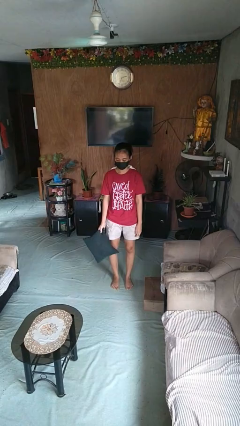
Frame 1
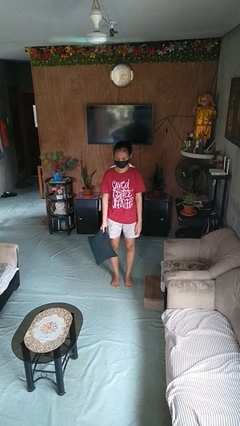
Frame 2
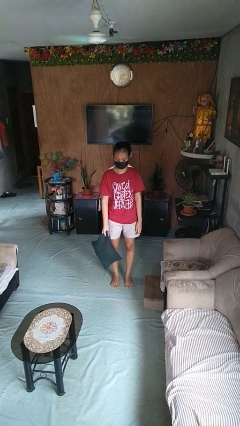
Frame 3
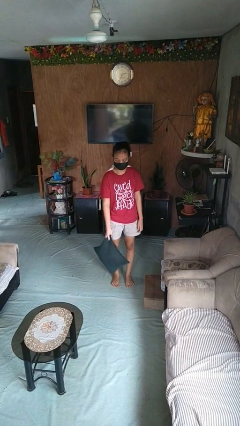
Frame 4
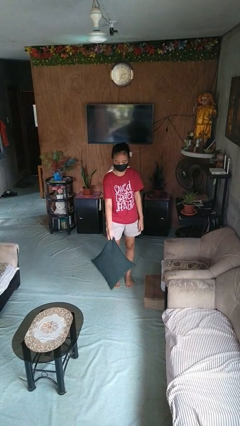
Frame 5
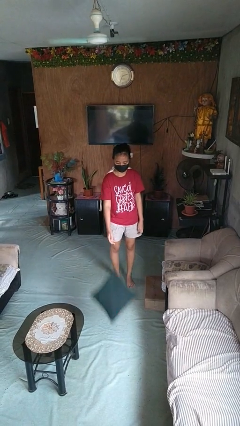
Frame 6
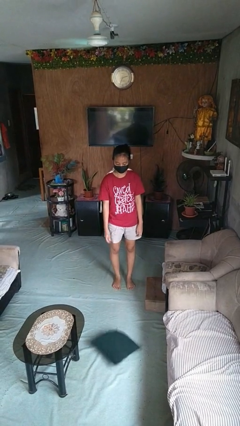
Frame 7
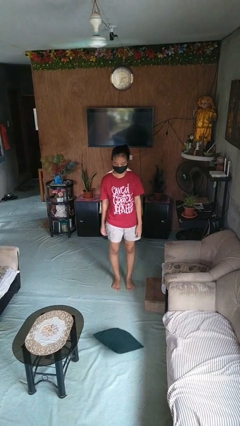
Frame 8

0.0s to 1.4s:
person throws object to ground

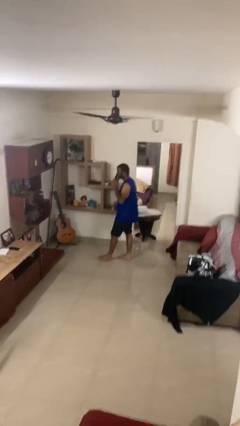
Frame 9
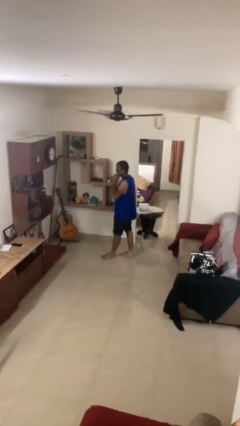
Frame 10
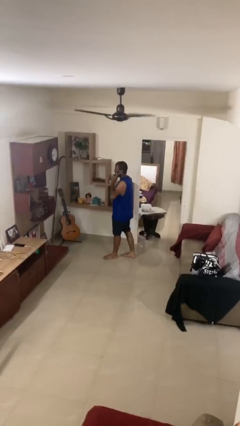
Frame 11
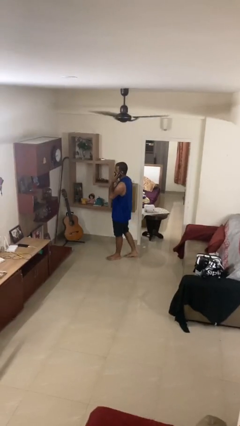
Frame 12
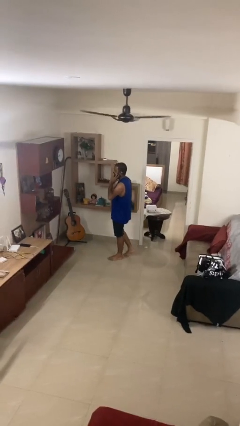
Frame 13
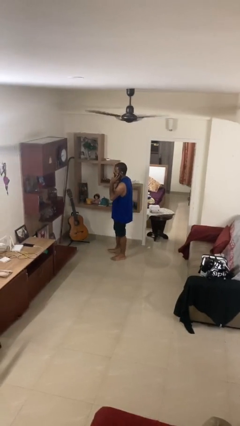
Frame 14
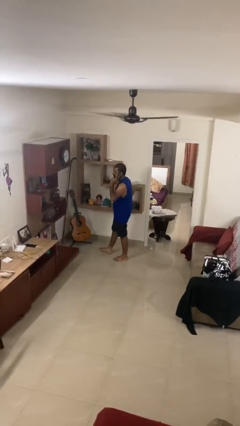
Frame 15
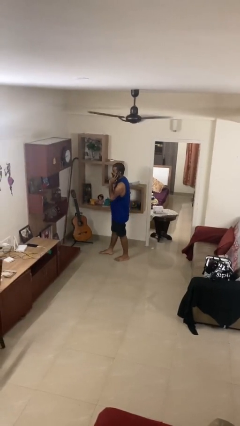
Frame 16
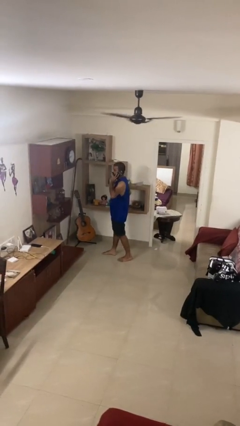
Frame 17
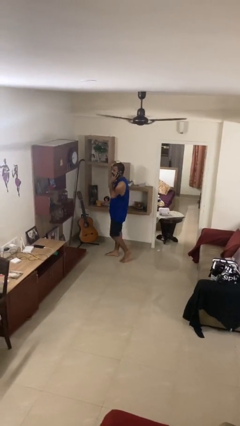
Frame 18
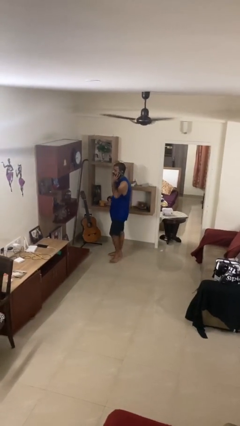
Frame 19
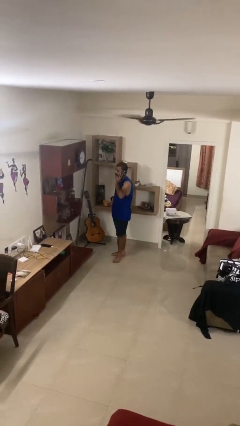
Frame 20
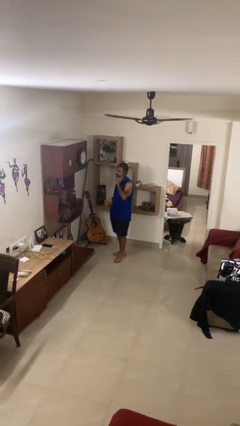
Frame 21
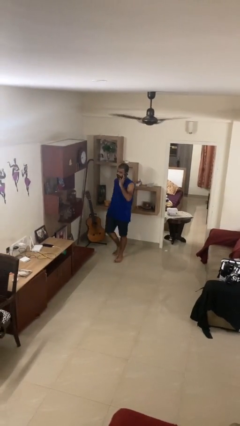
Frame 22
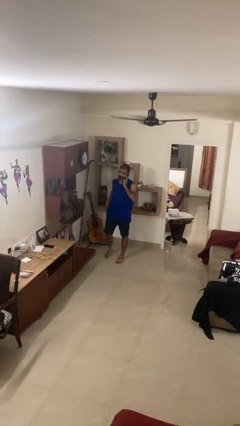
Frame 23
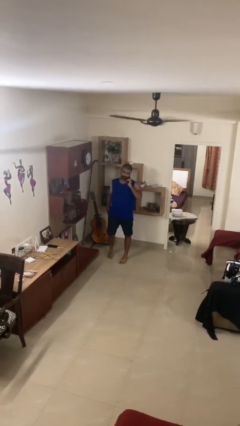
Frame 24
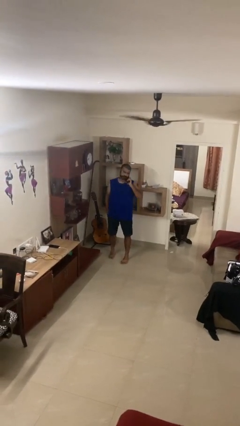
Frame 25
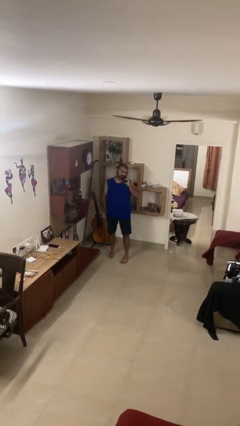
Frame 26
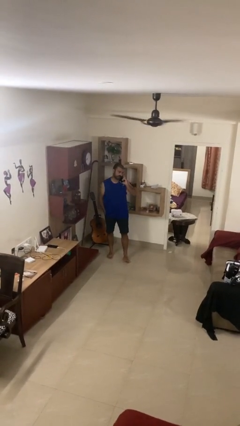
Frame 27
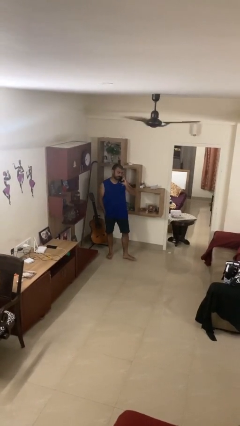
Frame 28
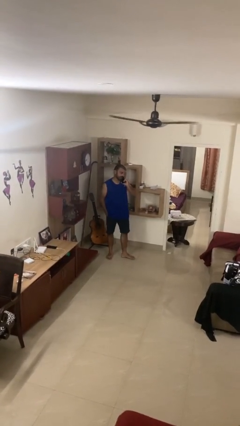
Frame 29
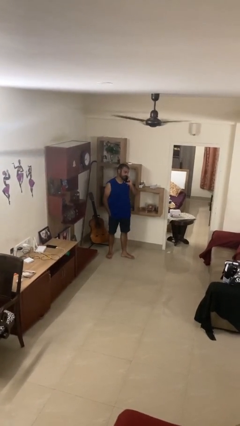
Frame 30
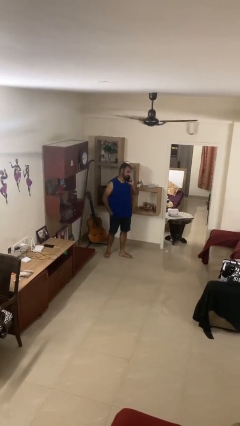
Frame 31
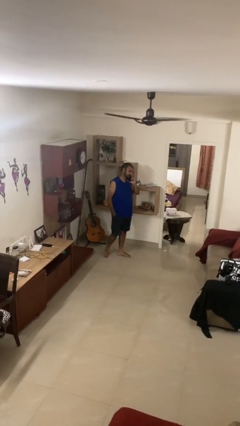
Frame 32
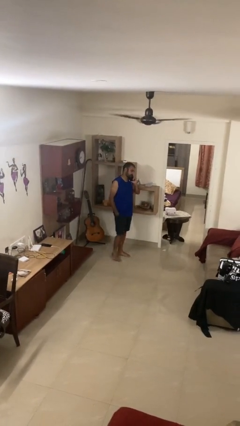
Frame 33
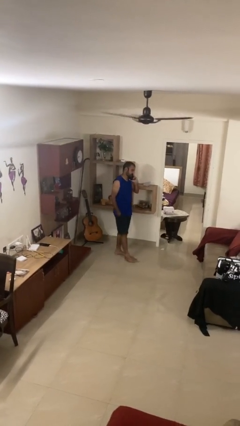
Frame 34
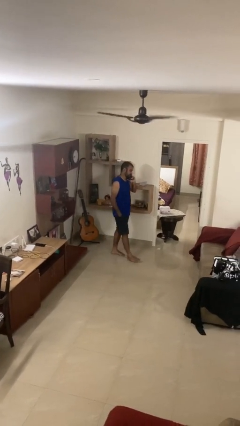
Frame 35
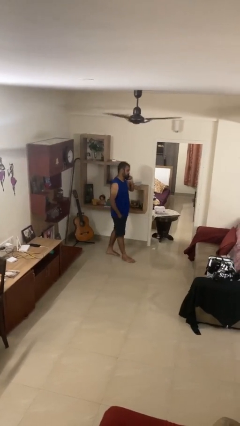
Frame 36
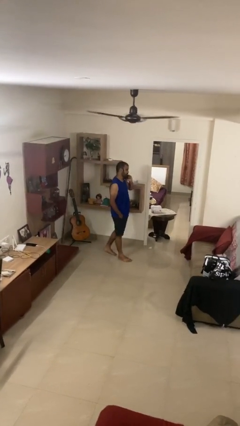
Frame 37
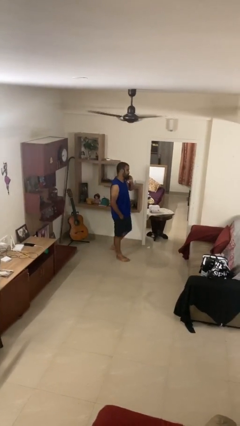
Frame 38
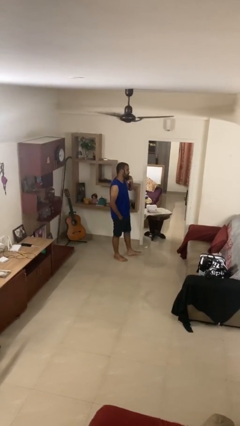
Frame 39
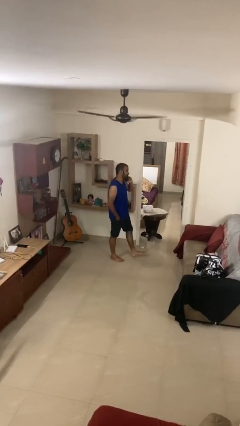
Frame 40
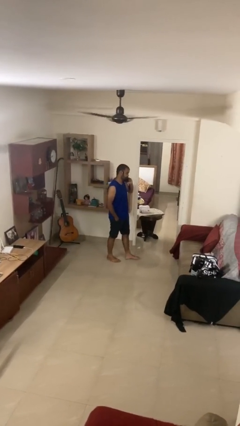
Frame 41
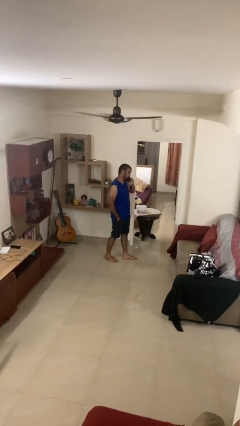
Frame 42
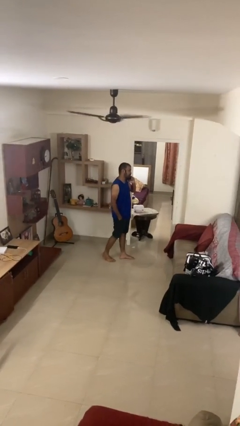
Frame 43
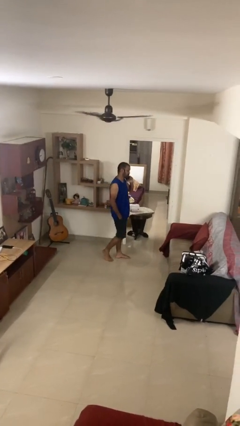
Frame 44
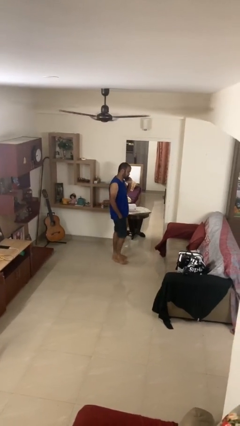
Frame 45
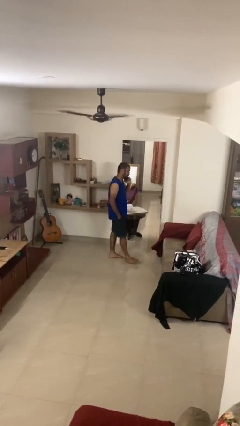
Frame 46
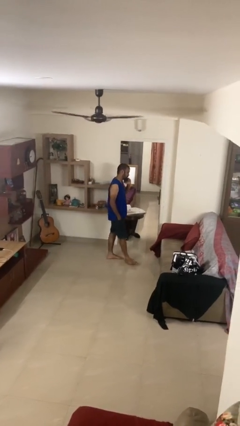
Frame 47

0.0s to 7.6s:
person talks on phone

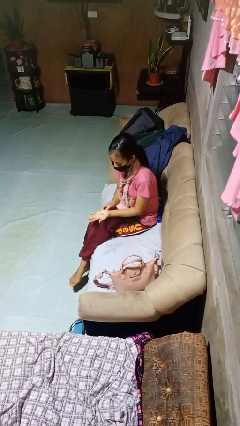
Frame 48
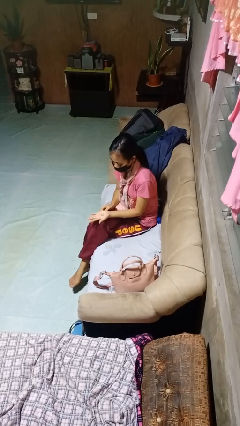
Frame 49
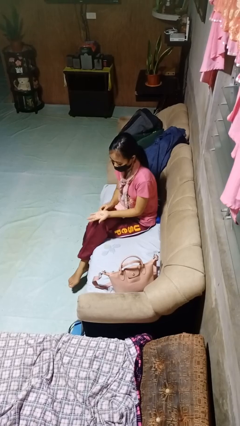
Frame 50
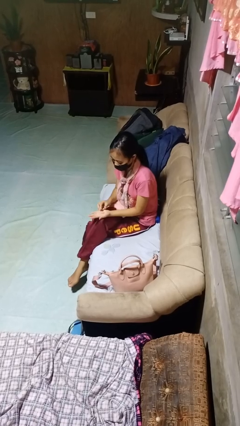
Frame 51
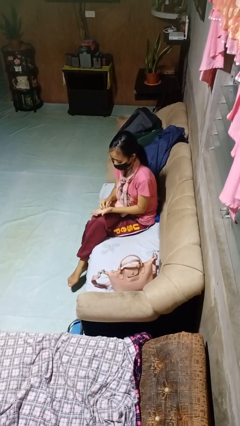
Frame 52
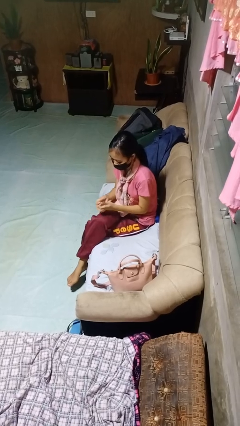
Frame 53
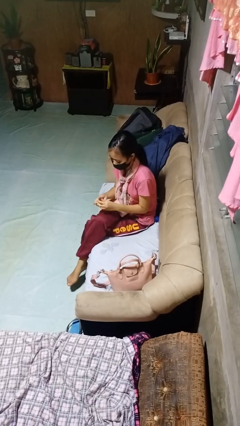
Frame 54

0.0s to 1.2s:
person puts on ring

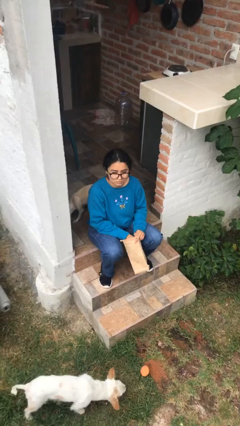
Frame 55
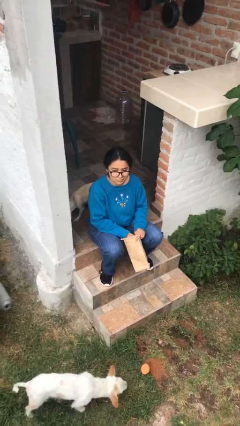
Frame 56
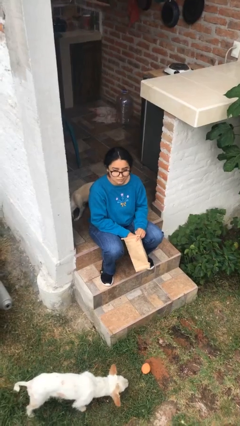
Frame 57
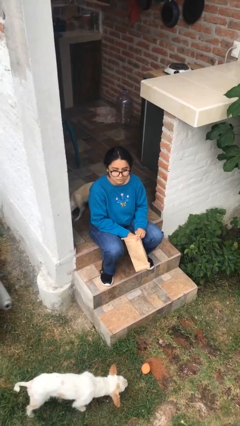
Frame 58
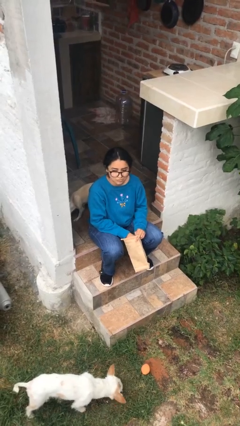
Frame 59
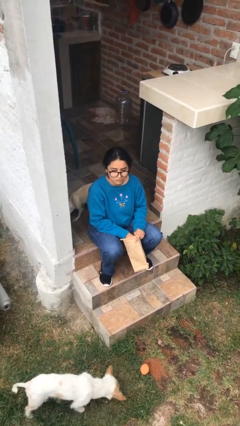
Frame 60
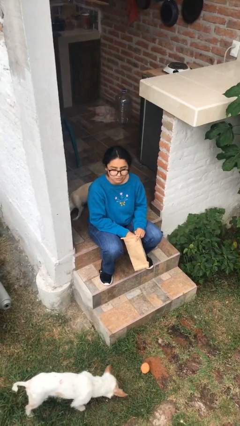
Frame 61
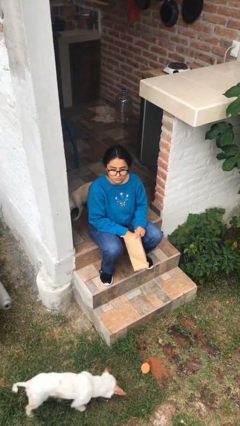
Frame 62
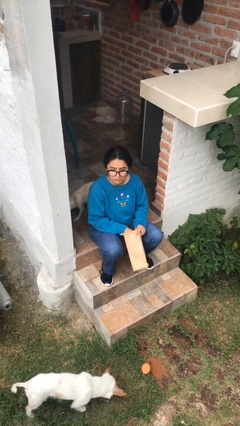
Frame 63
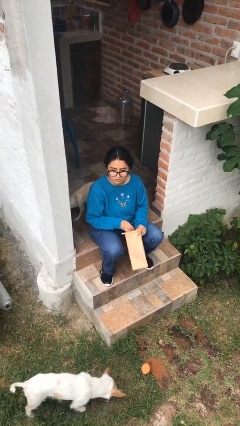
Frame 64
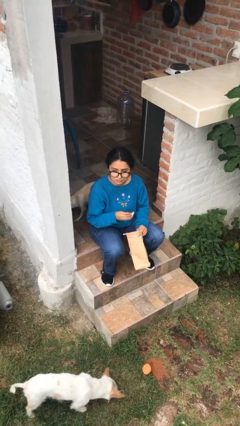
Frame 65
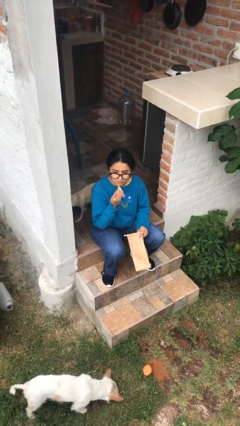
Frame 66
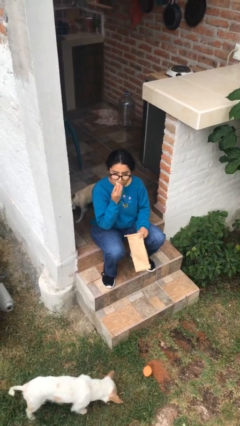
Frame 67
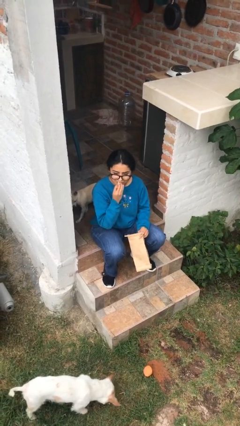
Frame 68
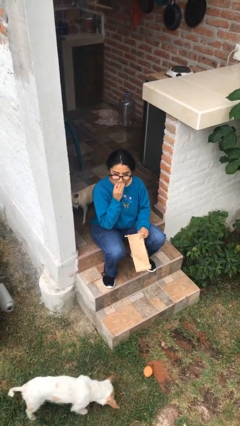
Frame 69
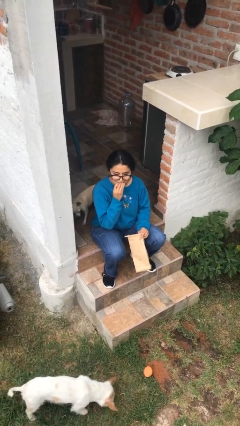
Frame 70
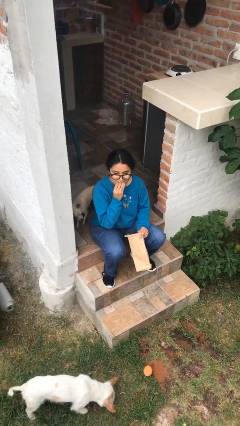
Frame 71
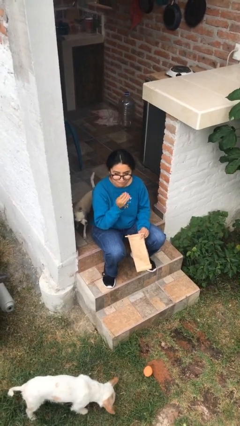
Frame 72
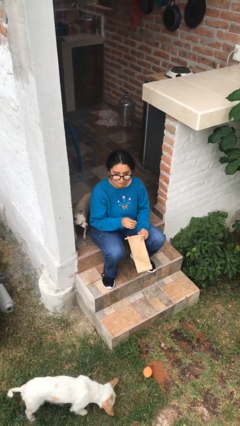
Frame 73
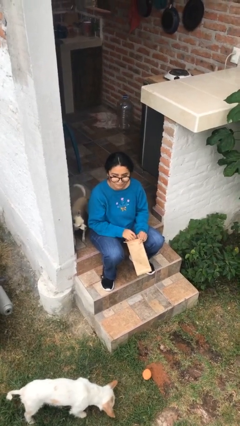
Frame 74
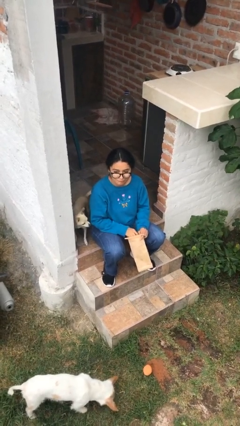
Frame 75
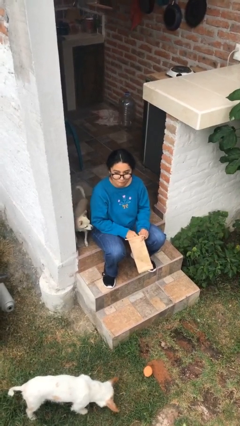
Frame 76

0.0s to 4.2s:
person eats snack from bag

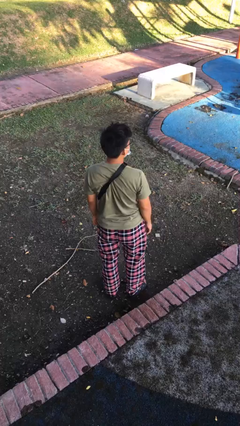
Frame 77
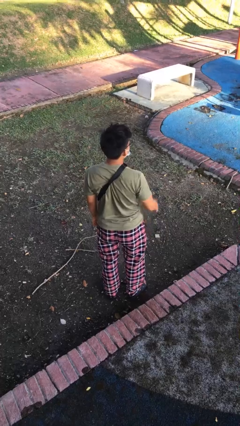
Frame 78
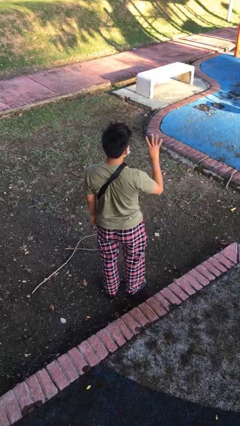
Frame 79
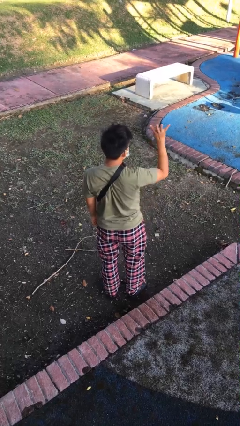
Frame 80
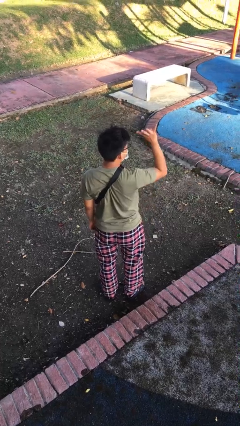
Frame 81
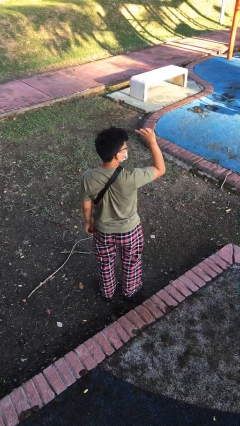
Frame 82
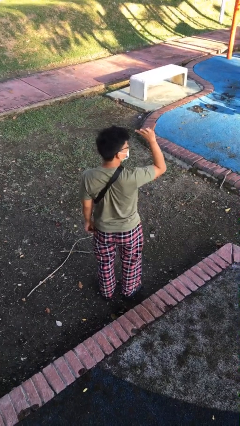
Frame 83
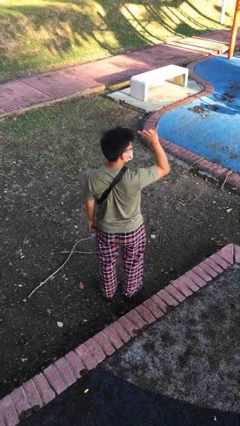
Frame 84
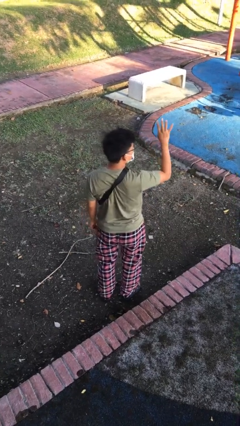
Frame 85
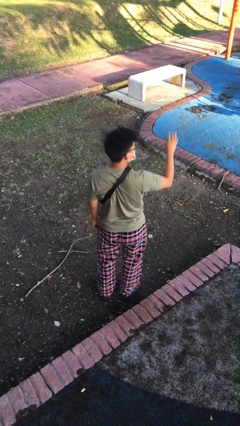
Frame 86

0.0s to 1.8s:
person gestures number four

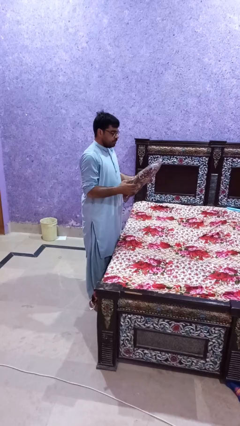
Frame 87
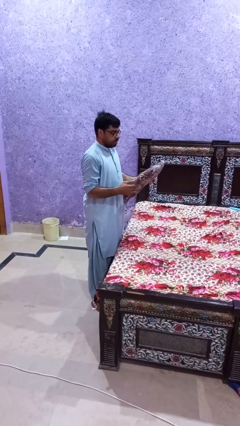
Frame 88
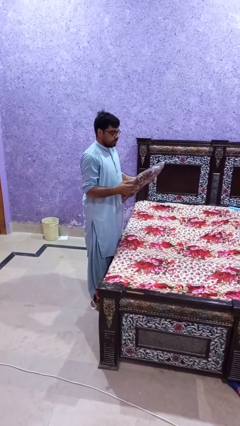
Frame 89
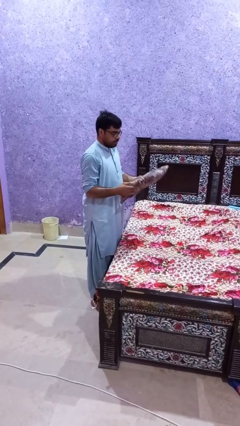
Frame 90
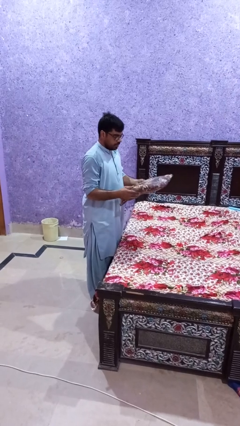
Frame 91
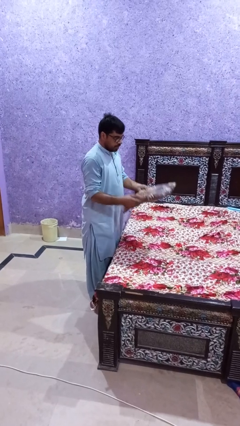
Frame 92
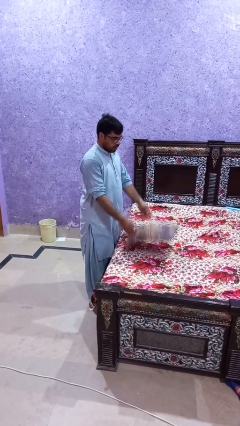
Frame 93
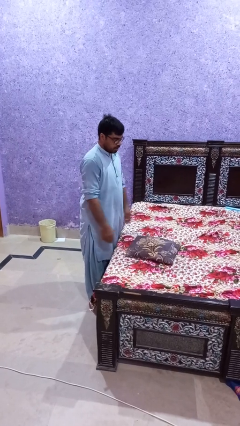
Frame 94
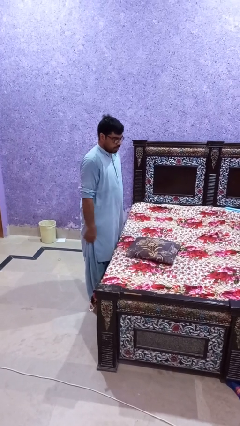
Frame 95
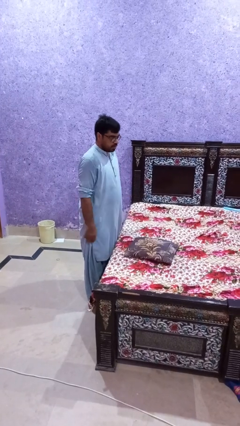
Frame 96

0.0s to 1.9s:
person puts down object on bed
